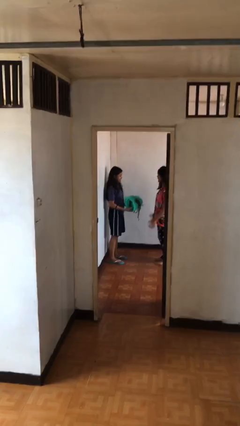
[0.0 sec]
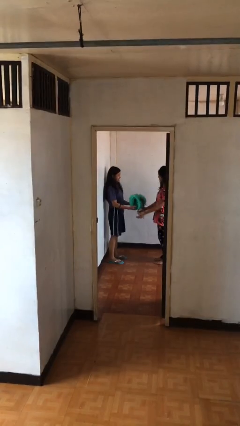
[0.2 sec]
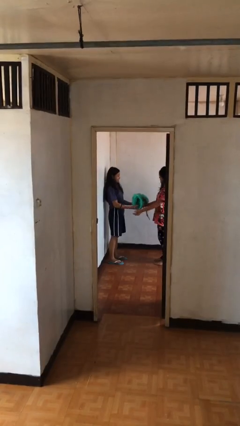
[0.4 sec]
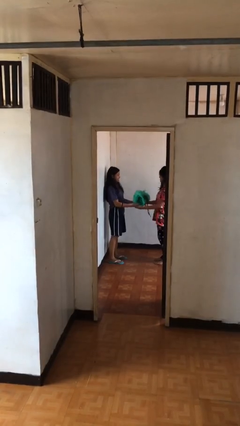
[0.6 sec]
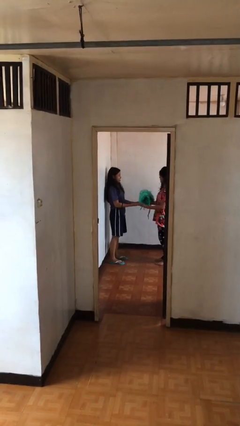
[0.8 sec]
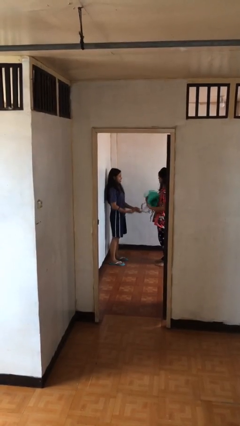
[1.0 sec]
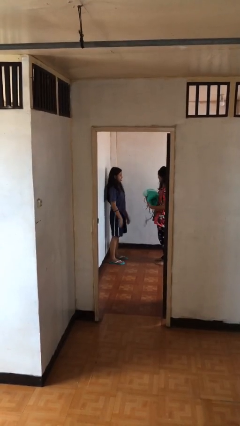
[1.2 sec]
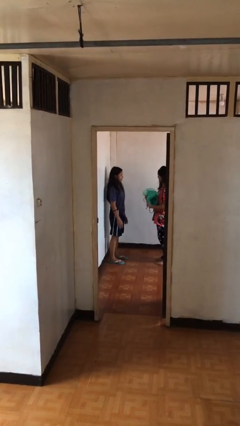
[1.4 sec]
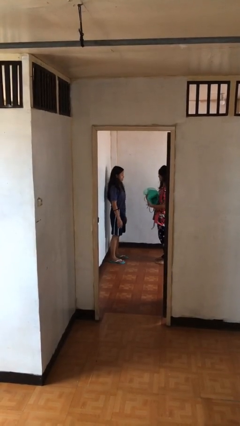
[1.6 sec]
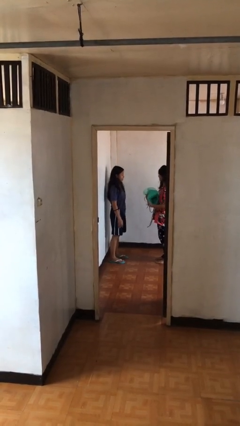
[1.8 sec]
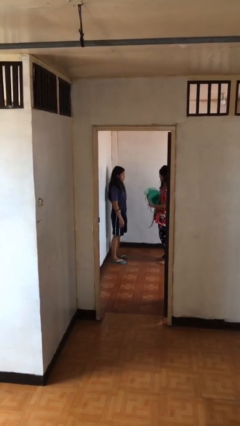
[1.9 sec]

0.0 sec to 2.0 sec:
person transfers object to person

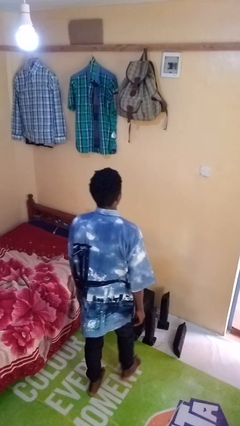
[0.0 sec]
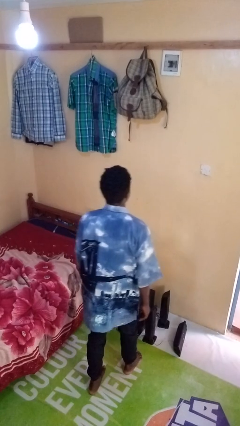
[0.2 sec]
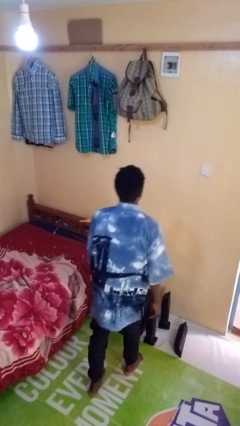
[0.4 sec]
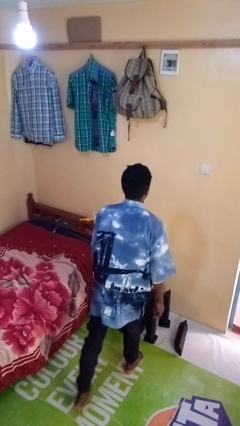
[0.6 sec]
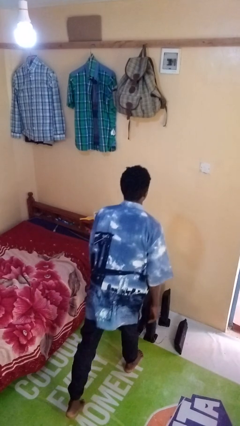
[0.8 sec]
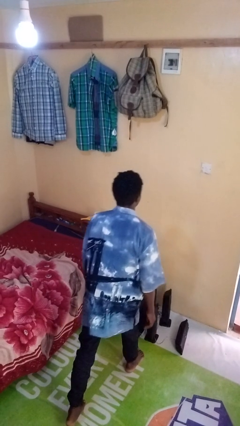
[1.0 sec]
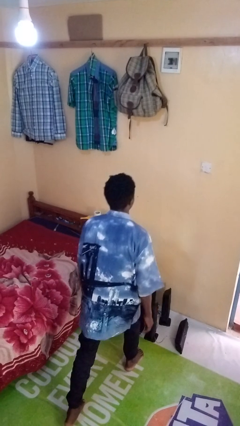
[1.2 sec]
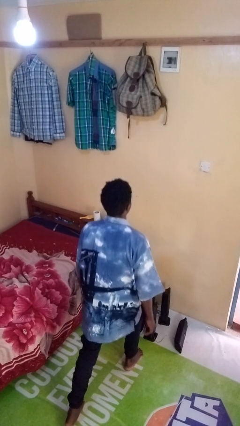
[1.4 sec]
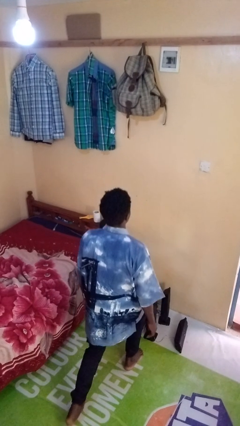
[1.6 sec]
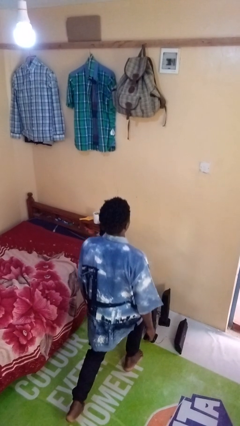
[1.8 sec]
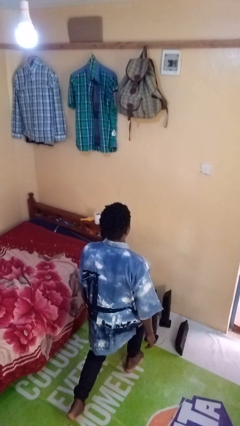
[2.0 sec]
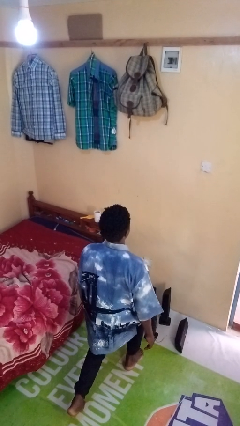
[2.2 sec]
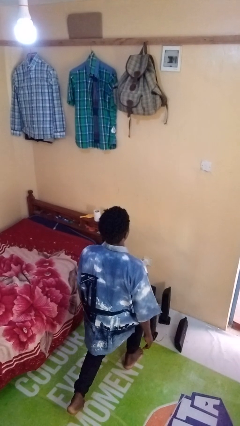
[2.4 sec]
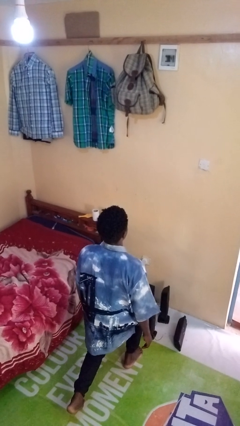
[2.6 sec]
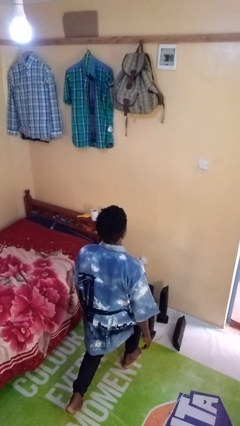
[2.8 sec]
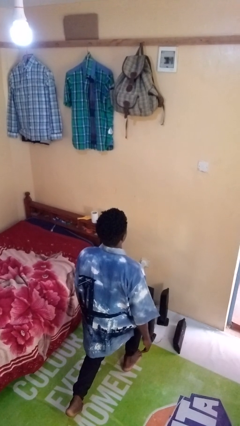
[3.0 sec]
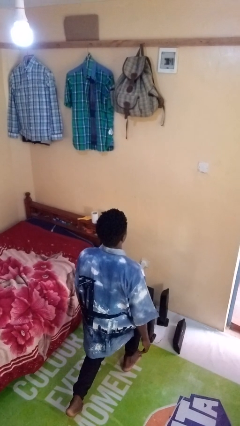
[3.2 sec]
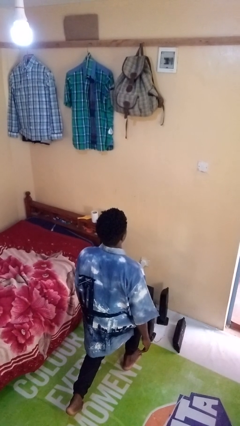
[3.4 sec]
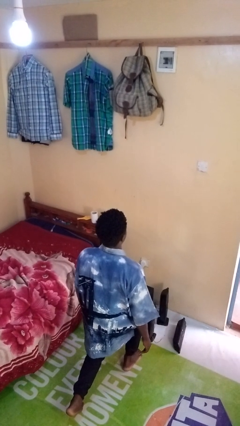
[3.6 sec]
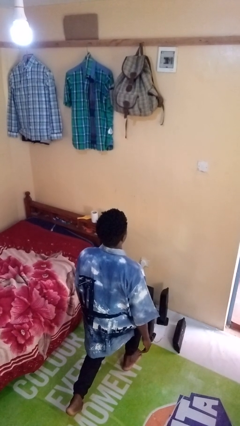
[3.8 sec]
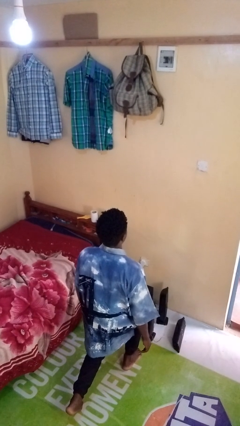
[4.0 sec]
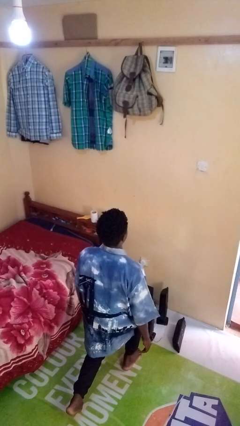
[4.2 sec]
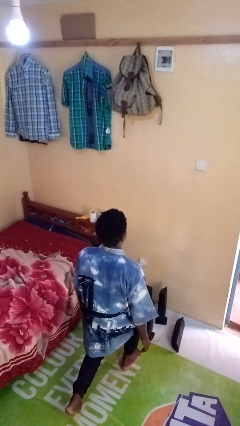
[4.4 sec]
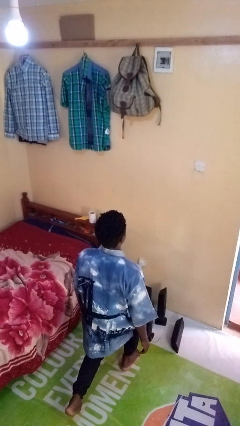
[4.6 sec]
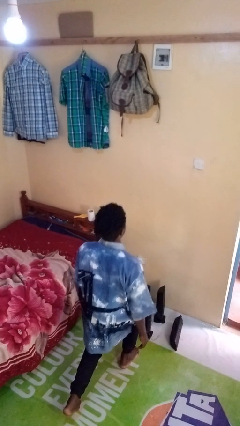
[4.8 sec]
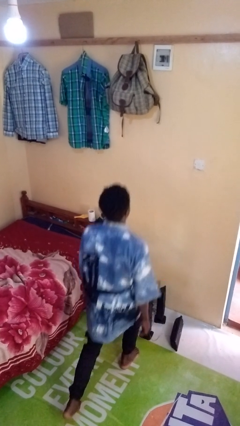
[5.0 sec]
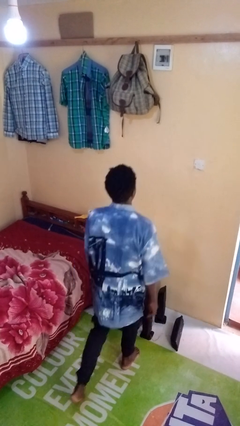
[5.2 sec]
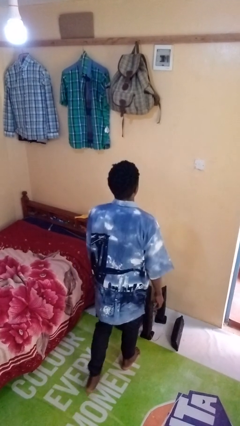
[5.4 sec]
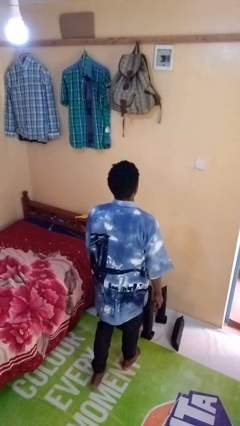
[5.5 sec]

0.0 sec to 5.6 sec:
person exercises with lunges

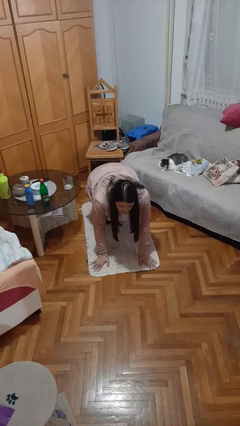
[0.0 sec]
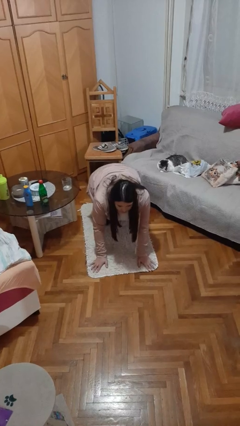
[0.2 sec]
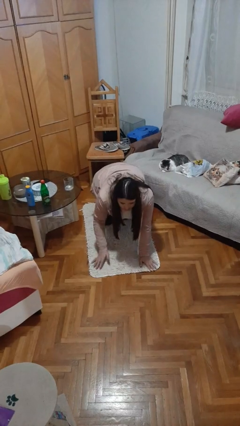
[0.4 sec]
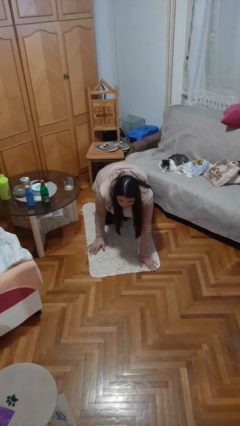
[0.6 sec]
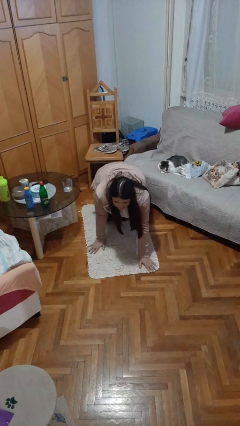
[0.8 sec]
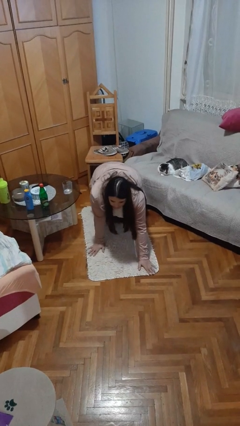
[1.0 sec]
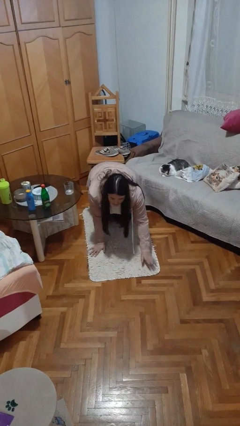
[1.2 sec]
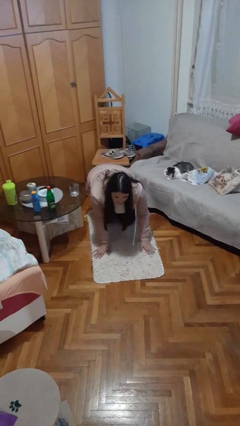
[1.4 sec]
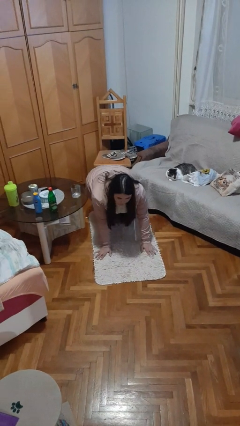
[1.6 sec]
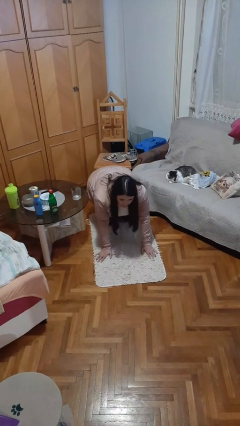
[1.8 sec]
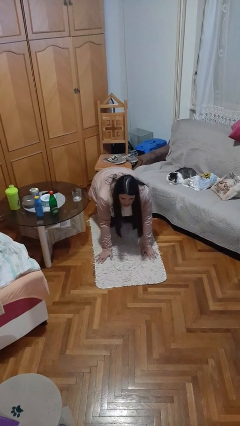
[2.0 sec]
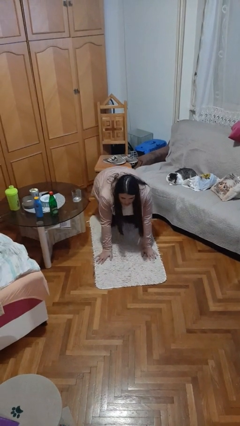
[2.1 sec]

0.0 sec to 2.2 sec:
person crawls

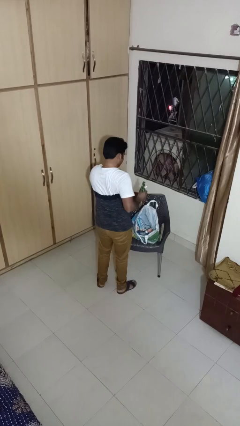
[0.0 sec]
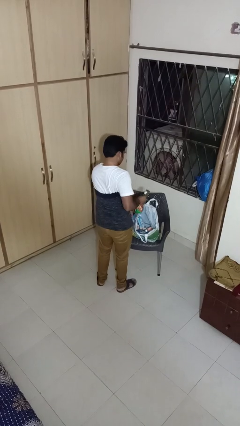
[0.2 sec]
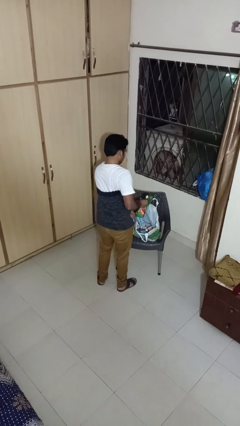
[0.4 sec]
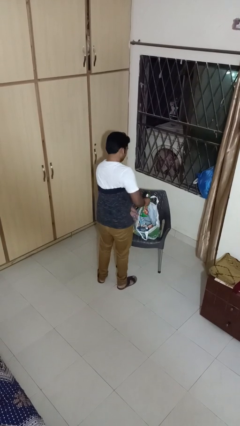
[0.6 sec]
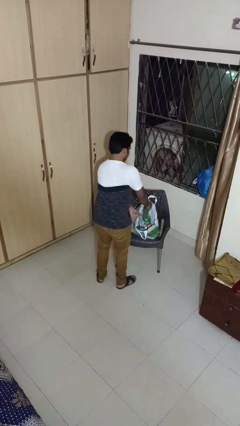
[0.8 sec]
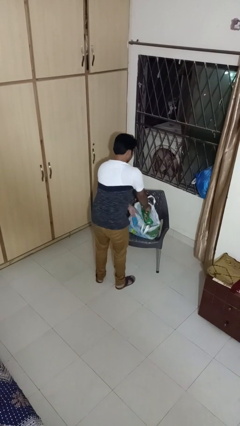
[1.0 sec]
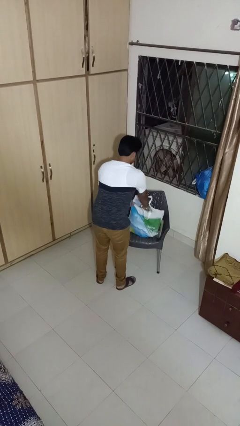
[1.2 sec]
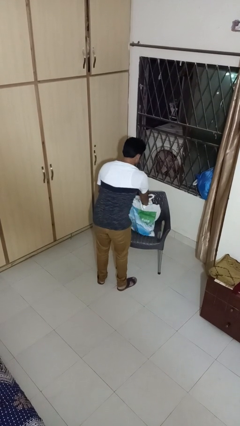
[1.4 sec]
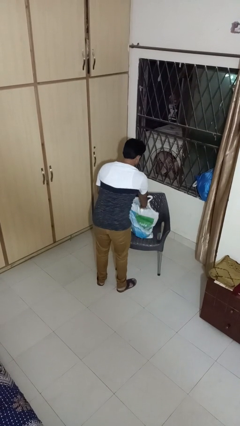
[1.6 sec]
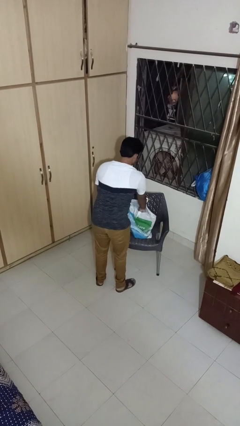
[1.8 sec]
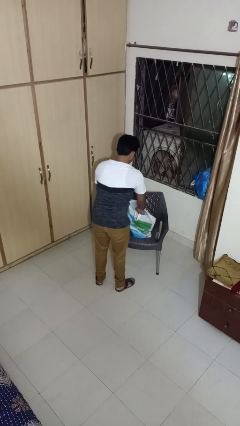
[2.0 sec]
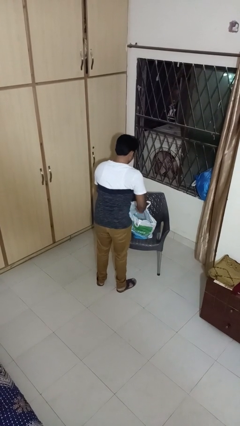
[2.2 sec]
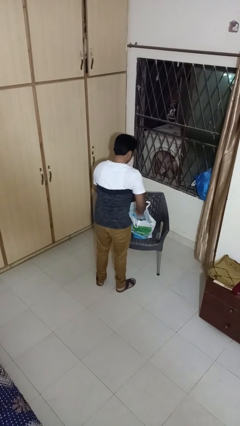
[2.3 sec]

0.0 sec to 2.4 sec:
person puts object into bag

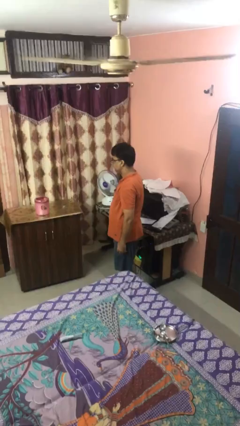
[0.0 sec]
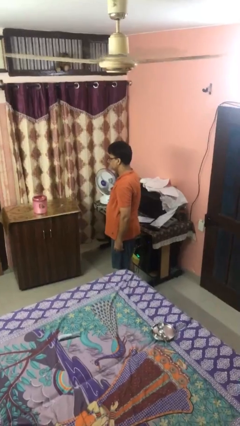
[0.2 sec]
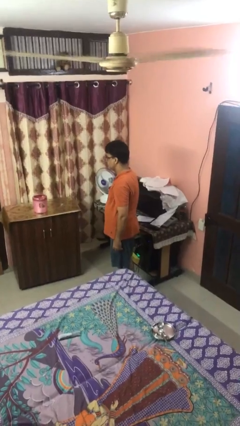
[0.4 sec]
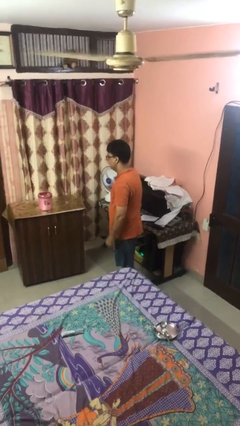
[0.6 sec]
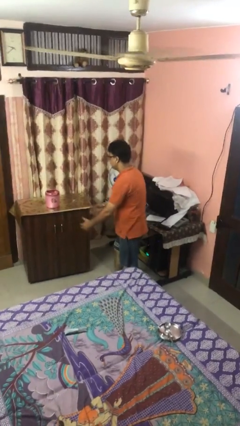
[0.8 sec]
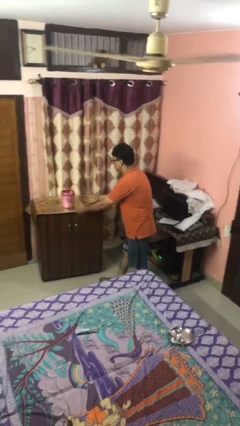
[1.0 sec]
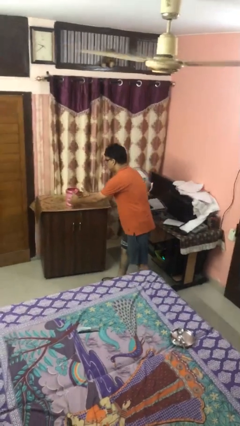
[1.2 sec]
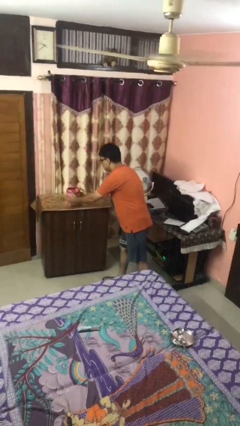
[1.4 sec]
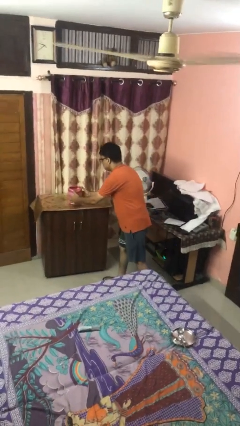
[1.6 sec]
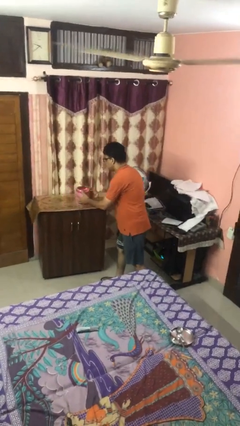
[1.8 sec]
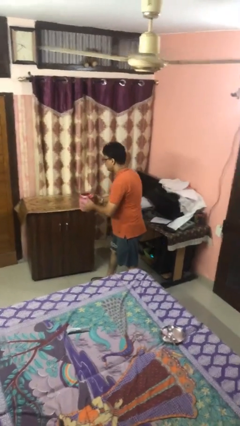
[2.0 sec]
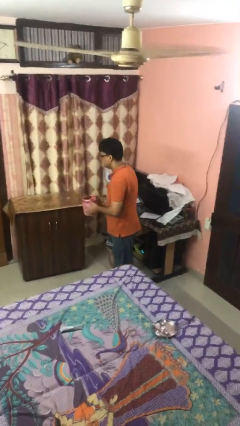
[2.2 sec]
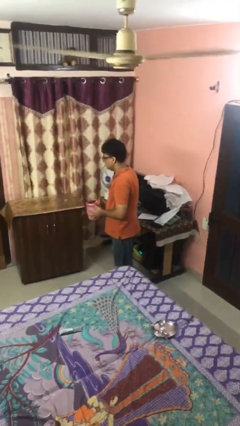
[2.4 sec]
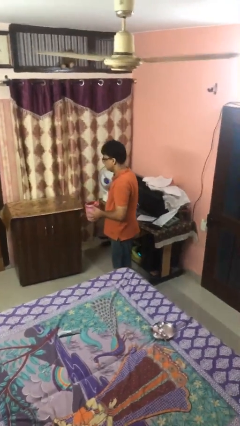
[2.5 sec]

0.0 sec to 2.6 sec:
person picks up object from countertop

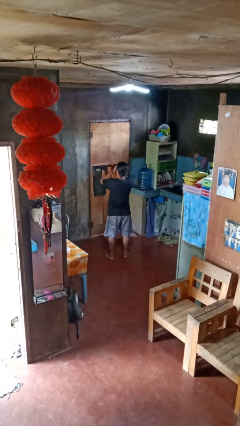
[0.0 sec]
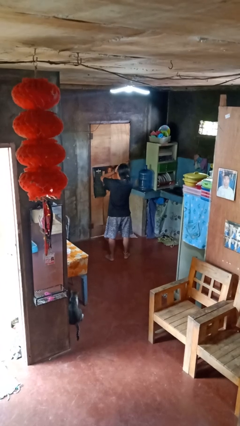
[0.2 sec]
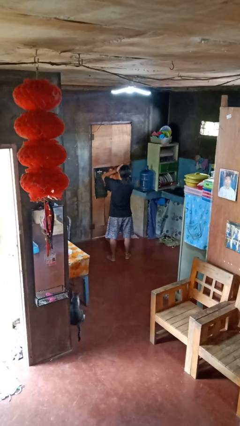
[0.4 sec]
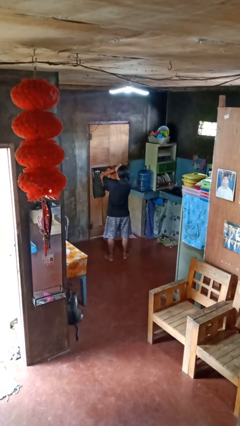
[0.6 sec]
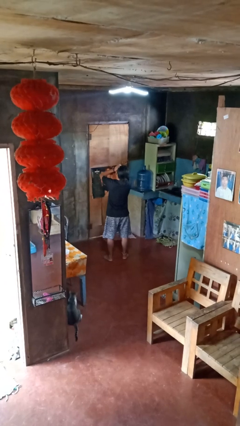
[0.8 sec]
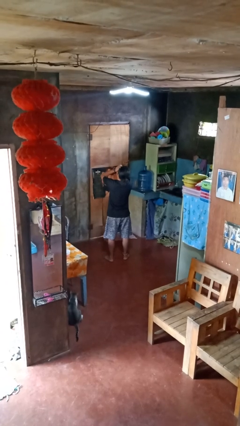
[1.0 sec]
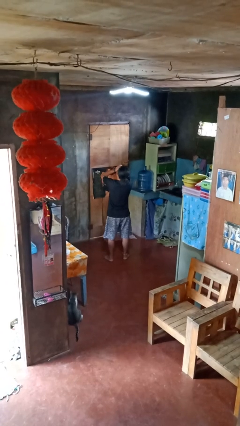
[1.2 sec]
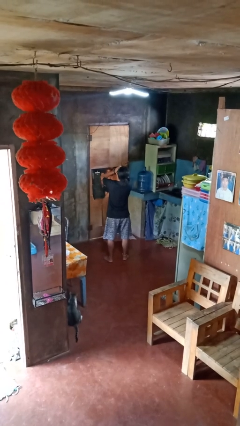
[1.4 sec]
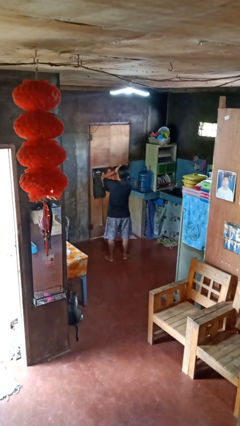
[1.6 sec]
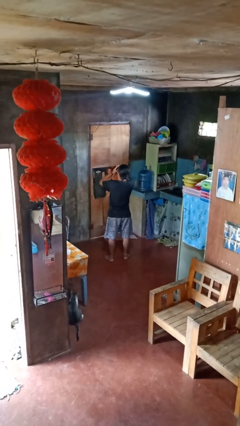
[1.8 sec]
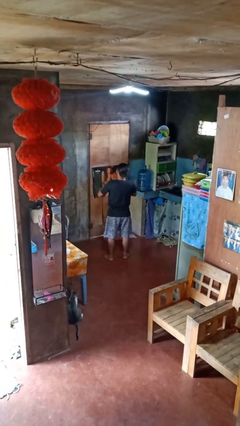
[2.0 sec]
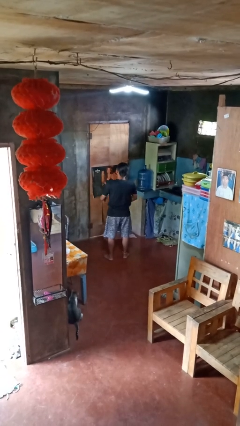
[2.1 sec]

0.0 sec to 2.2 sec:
person yawns
